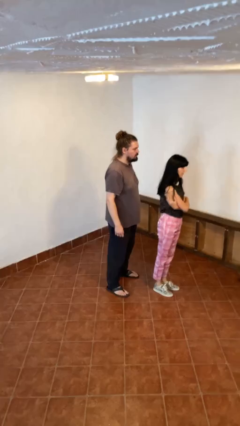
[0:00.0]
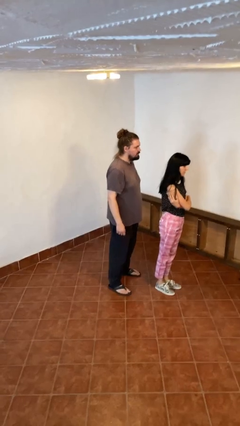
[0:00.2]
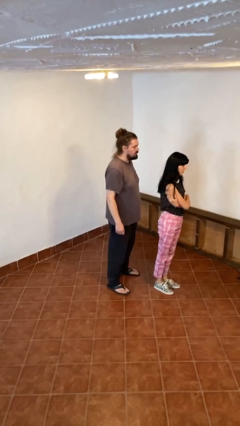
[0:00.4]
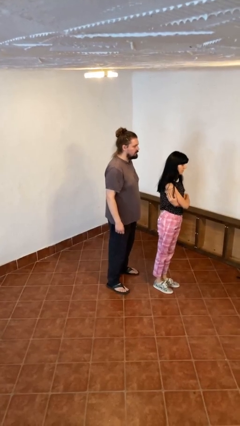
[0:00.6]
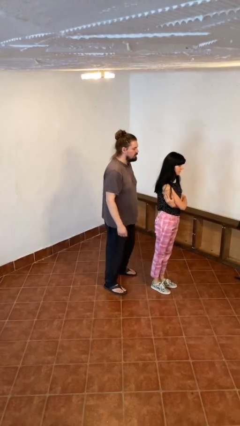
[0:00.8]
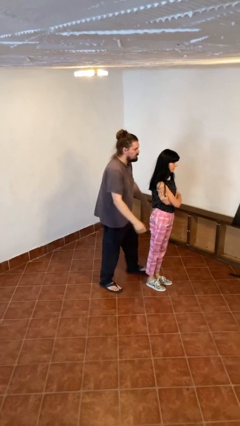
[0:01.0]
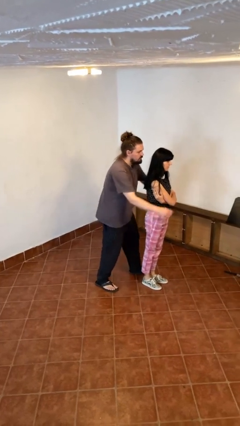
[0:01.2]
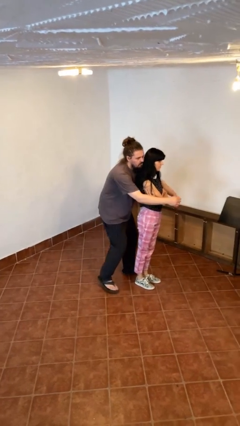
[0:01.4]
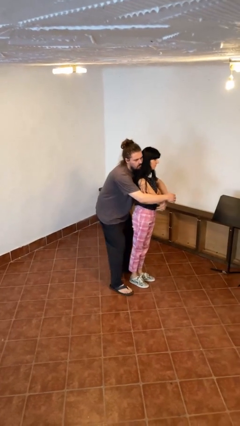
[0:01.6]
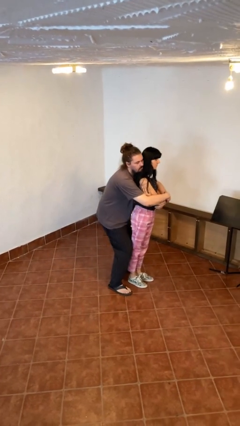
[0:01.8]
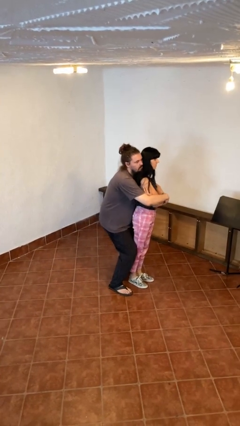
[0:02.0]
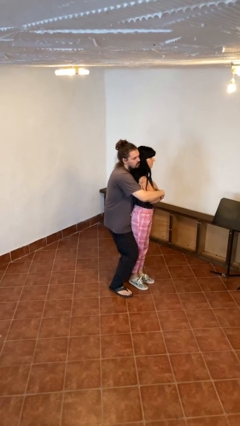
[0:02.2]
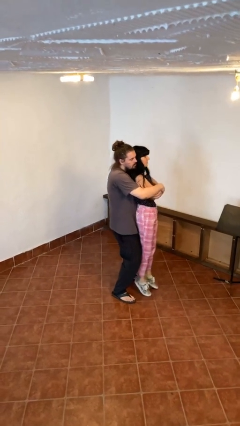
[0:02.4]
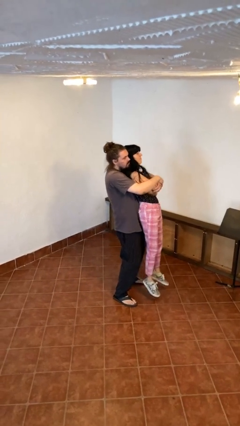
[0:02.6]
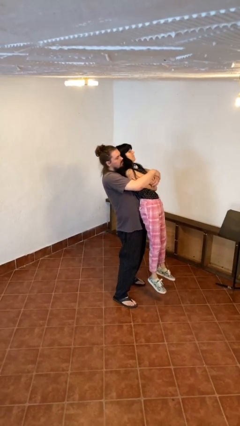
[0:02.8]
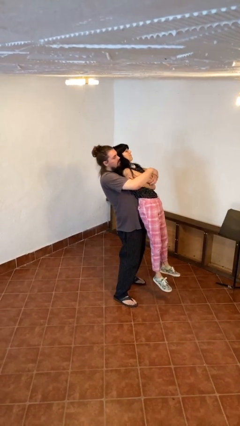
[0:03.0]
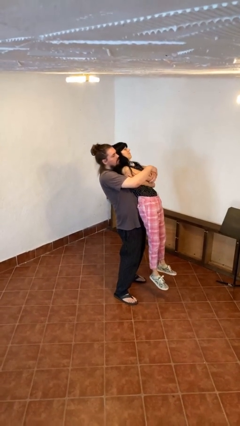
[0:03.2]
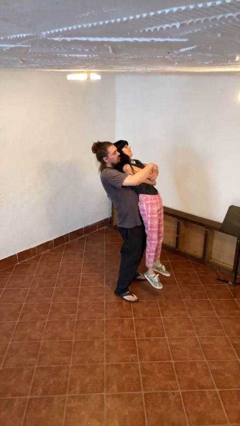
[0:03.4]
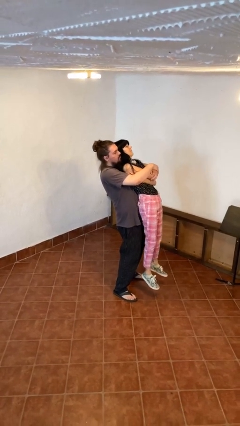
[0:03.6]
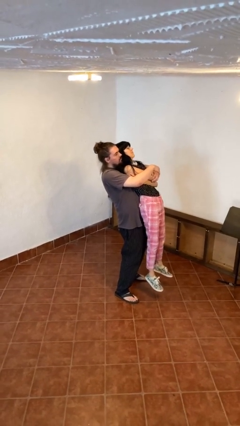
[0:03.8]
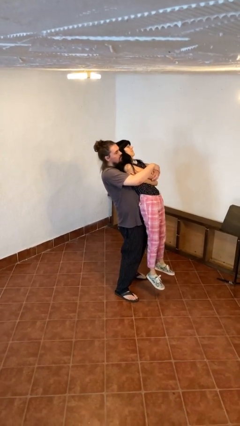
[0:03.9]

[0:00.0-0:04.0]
person picks up person

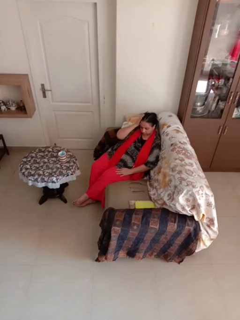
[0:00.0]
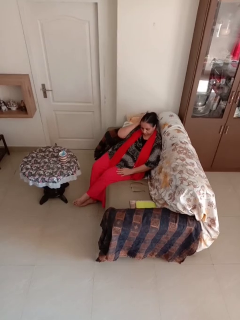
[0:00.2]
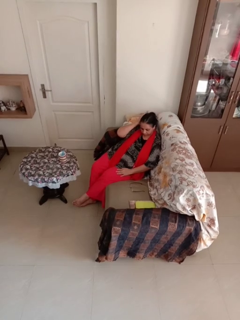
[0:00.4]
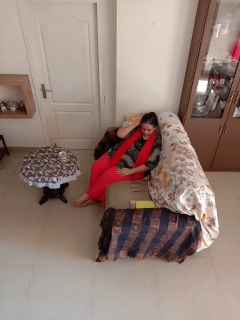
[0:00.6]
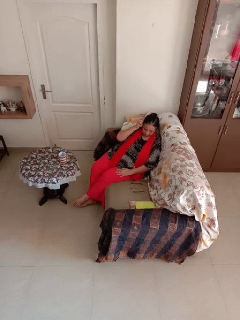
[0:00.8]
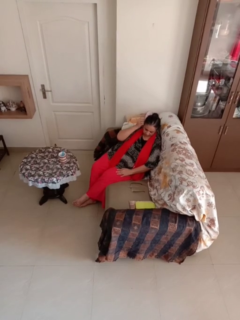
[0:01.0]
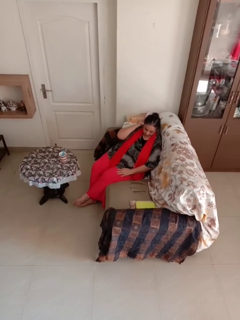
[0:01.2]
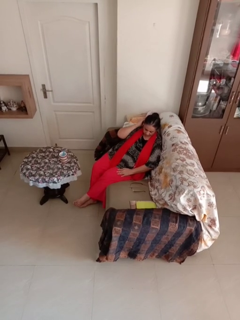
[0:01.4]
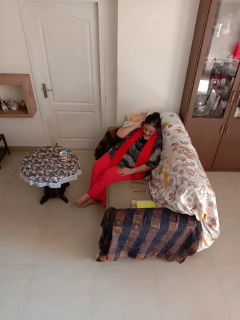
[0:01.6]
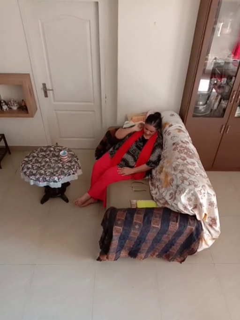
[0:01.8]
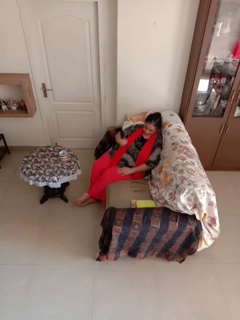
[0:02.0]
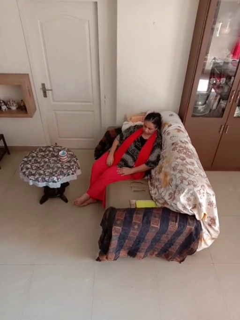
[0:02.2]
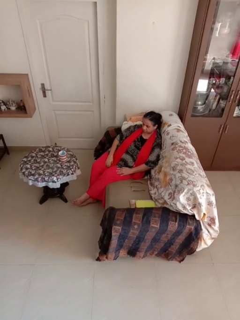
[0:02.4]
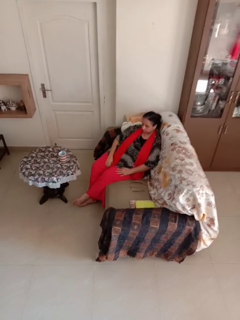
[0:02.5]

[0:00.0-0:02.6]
person strokes hair

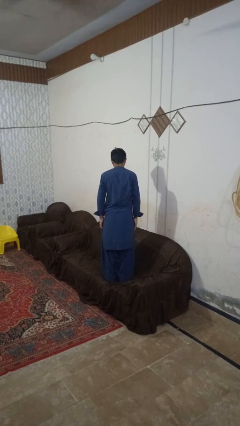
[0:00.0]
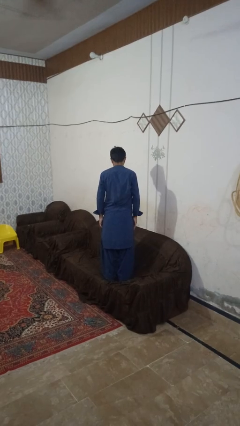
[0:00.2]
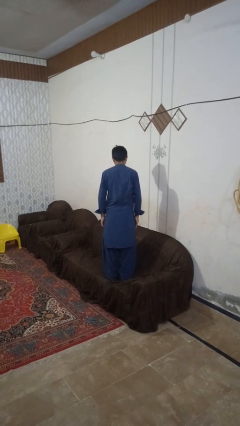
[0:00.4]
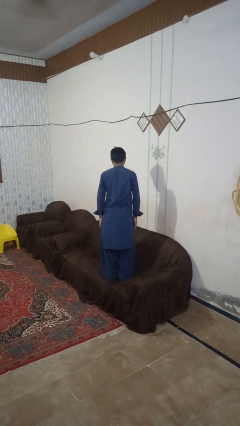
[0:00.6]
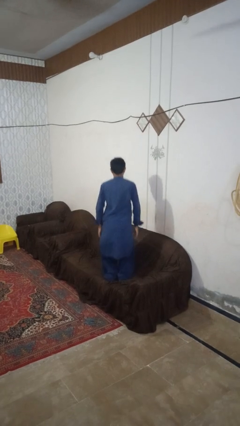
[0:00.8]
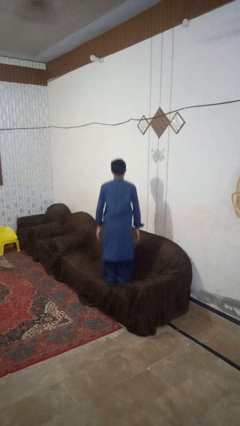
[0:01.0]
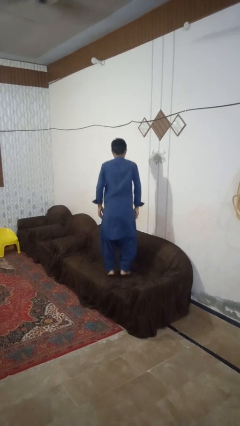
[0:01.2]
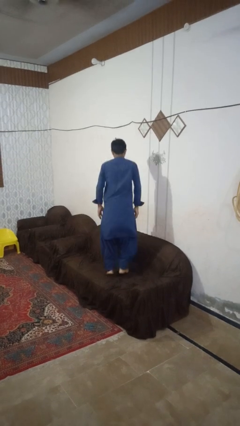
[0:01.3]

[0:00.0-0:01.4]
person jumps on couch

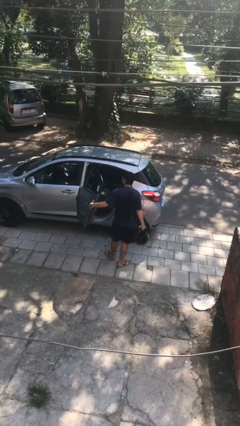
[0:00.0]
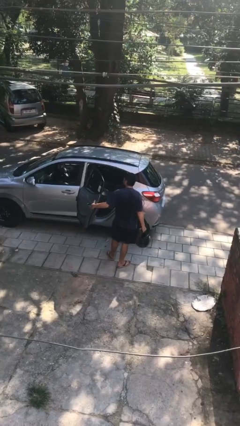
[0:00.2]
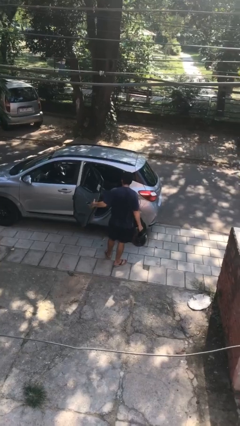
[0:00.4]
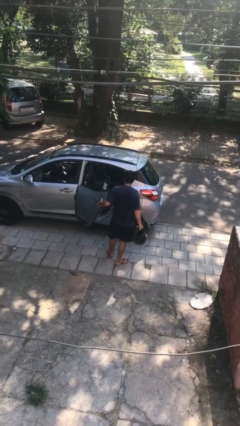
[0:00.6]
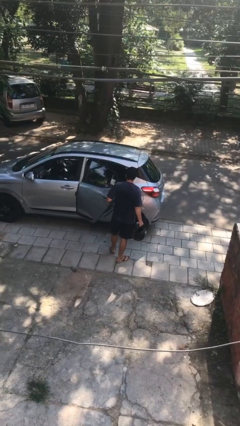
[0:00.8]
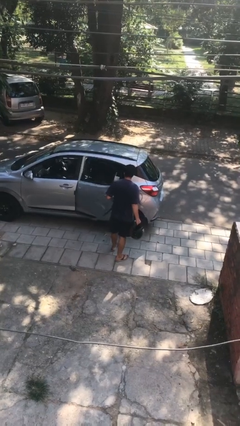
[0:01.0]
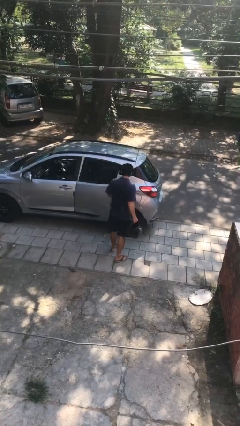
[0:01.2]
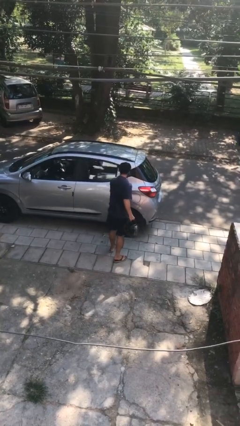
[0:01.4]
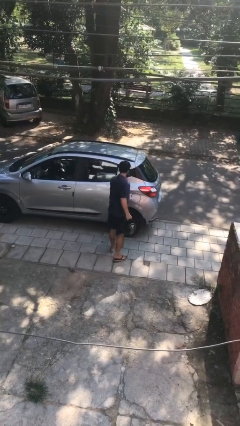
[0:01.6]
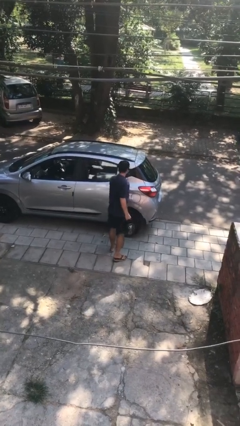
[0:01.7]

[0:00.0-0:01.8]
person closes car door

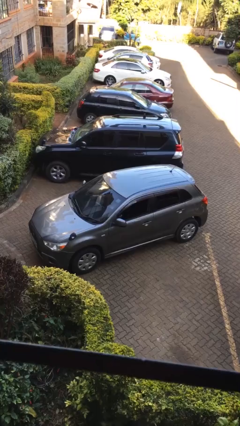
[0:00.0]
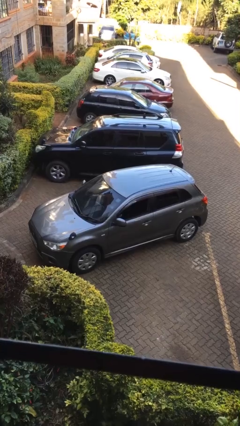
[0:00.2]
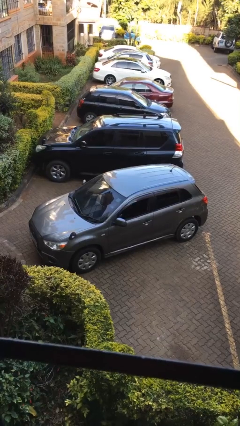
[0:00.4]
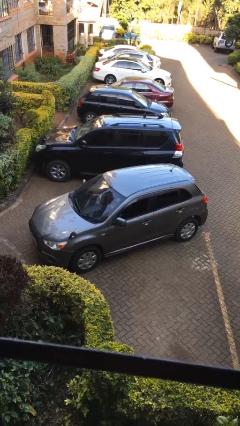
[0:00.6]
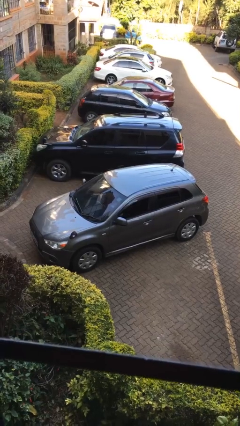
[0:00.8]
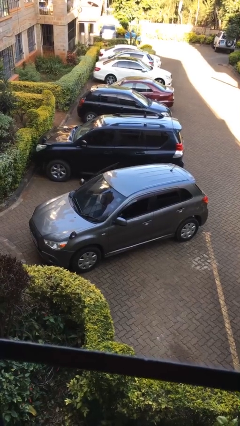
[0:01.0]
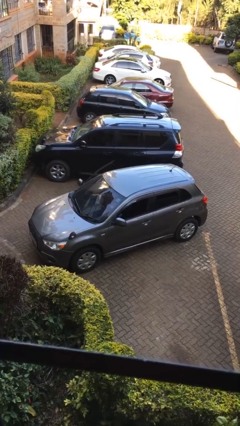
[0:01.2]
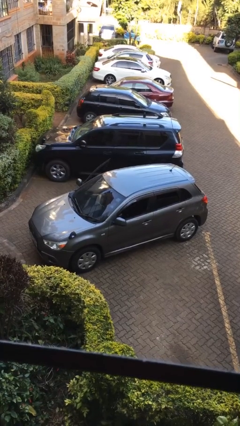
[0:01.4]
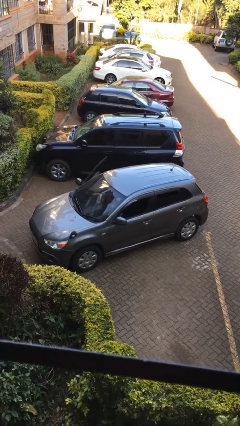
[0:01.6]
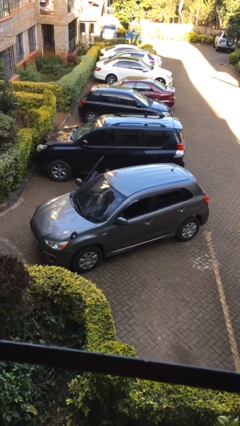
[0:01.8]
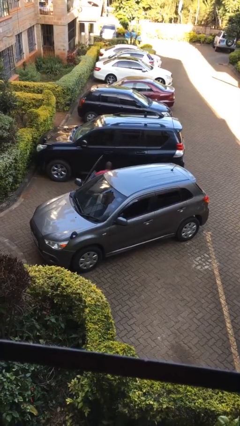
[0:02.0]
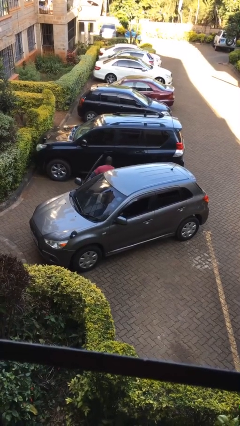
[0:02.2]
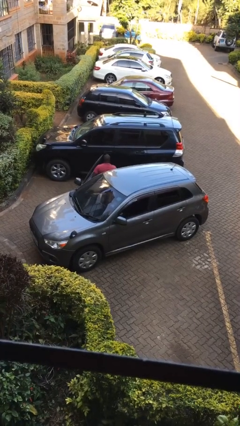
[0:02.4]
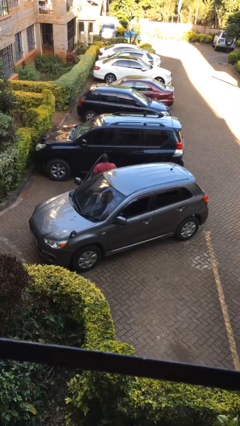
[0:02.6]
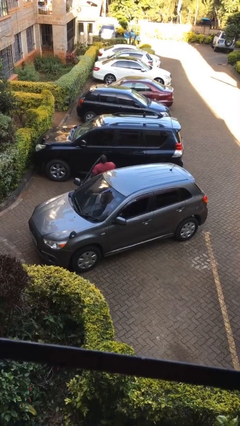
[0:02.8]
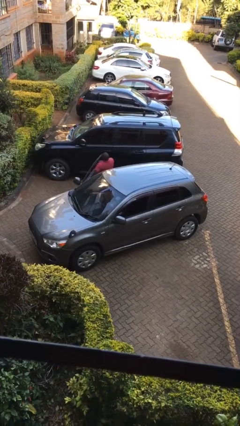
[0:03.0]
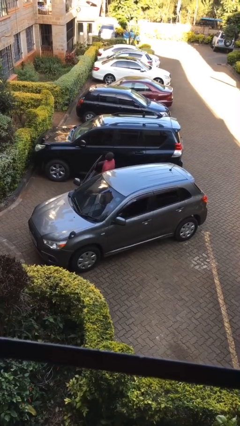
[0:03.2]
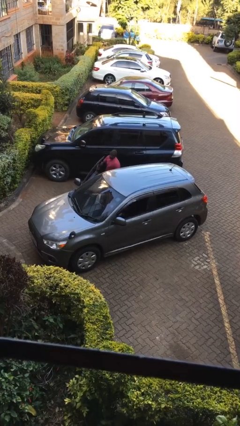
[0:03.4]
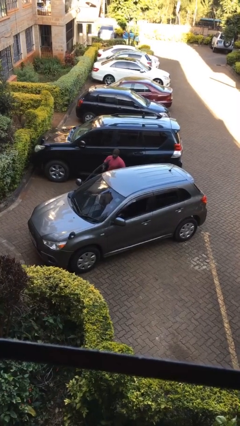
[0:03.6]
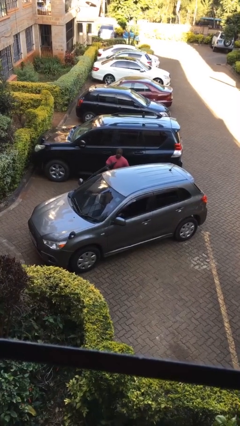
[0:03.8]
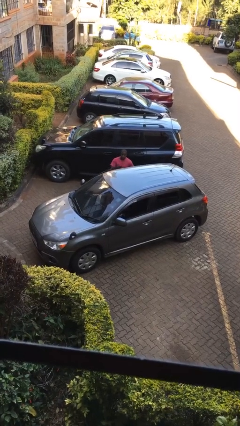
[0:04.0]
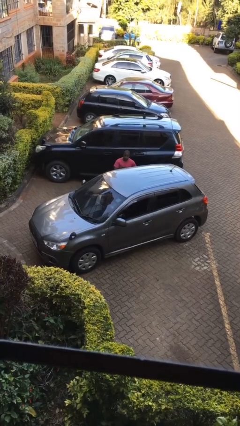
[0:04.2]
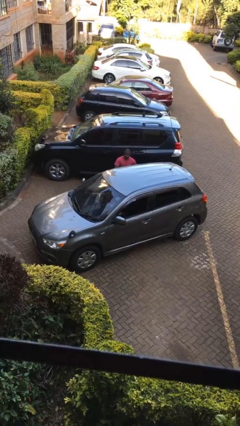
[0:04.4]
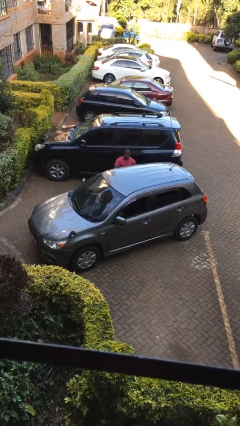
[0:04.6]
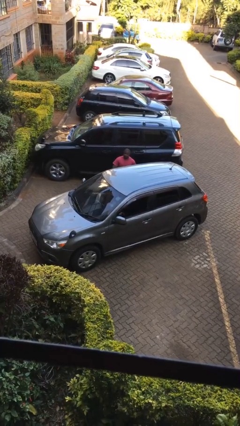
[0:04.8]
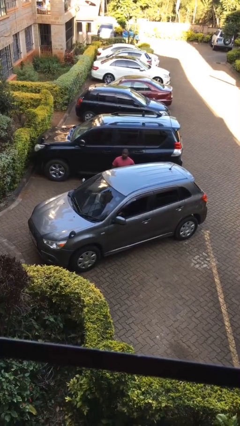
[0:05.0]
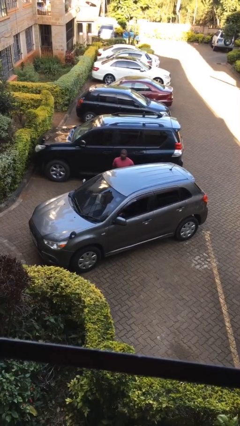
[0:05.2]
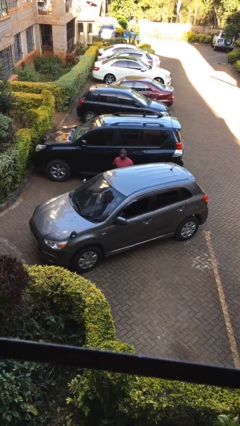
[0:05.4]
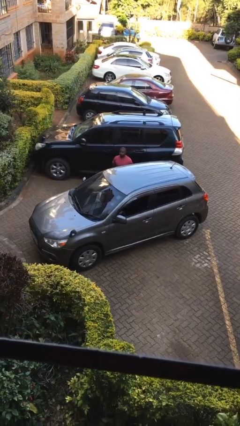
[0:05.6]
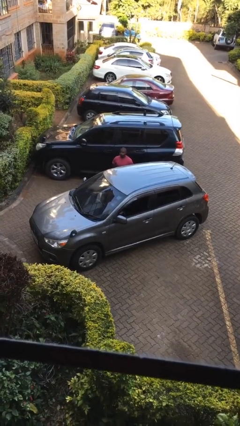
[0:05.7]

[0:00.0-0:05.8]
car drops off person

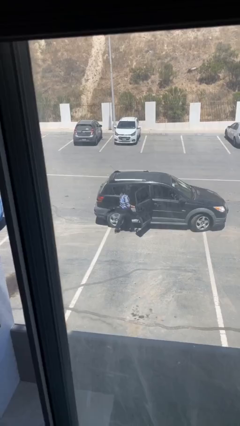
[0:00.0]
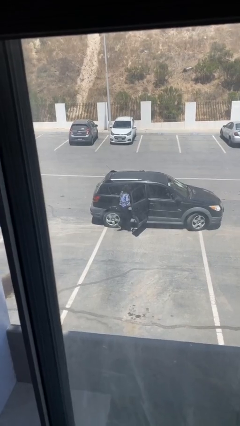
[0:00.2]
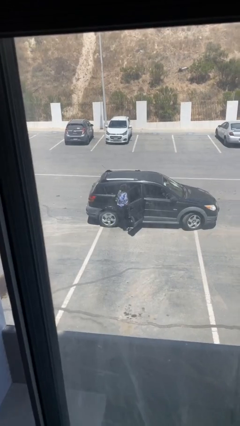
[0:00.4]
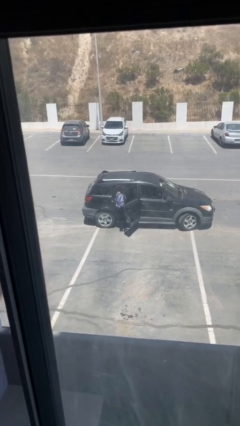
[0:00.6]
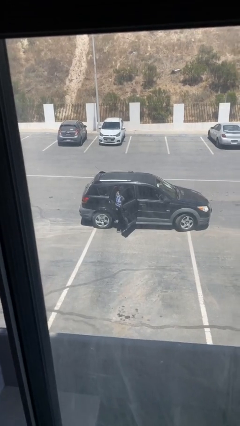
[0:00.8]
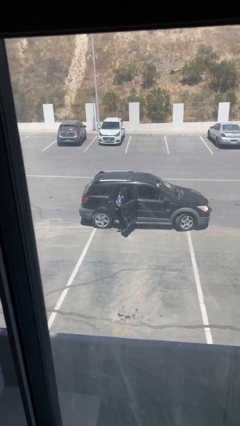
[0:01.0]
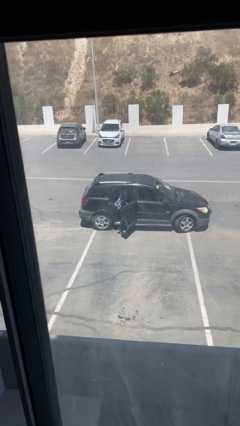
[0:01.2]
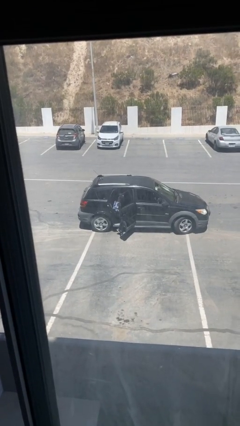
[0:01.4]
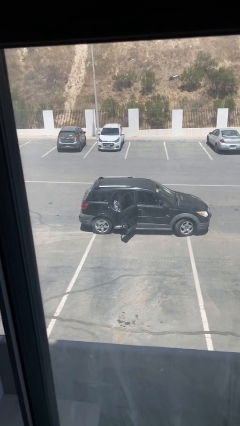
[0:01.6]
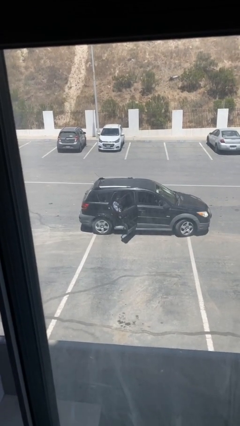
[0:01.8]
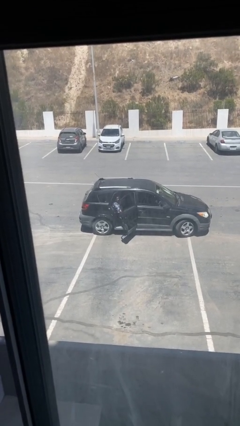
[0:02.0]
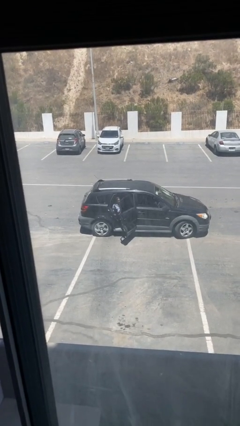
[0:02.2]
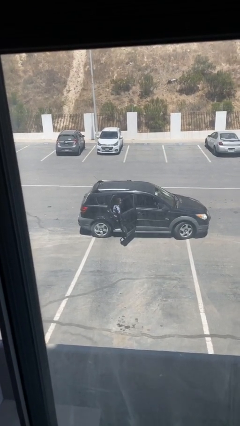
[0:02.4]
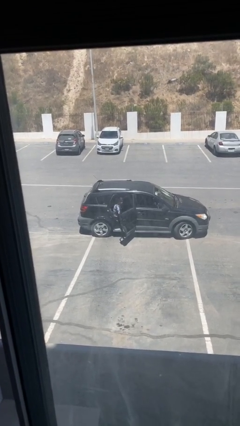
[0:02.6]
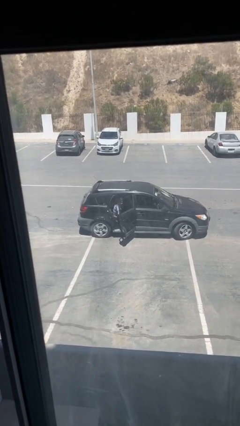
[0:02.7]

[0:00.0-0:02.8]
person enters car
